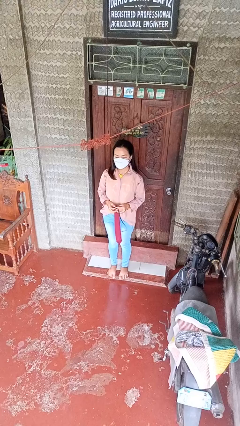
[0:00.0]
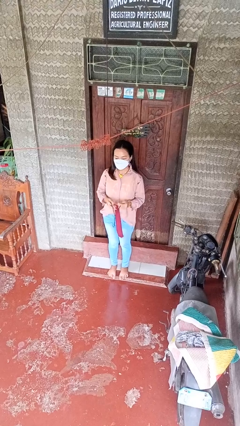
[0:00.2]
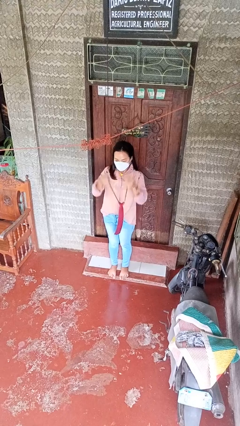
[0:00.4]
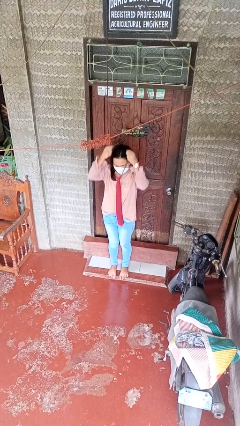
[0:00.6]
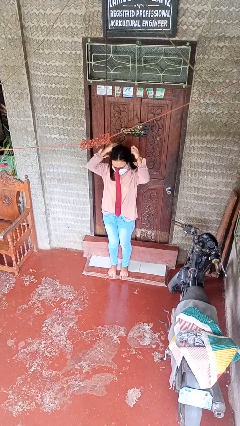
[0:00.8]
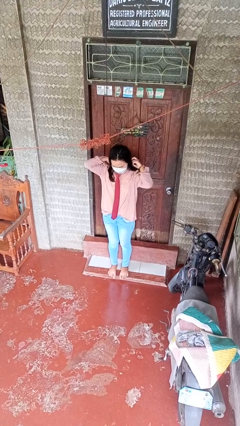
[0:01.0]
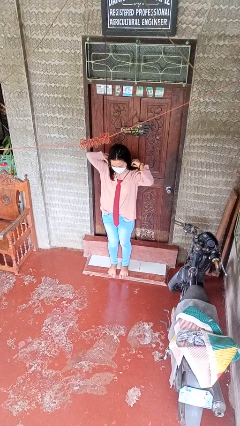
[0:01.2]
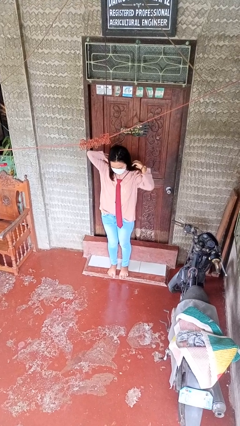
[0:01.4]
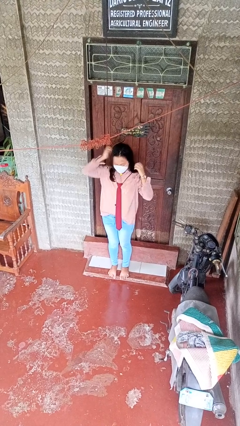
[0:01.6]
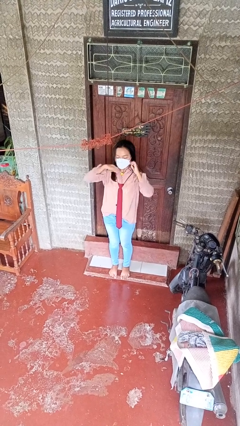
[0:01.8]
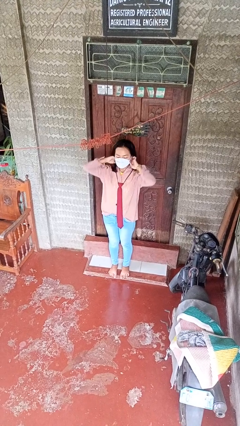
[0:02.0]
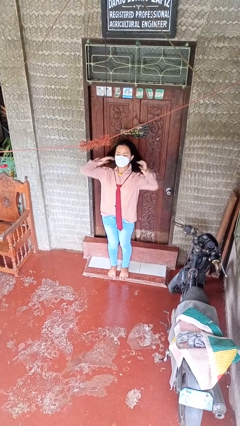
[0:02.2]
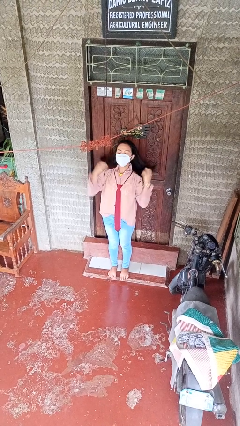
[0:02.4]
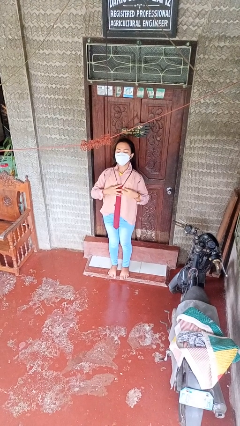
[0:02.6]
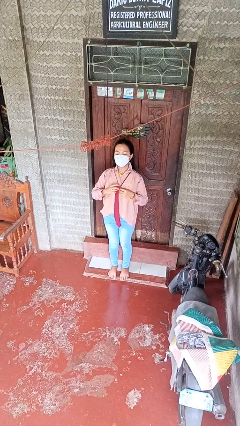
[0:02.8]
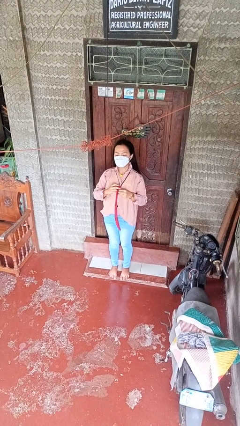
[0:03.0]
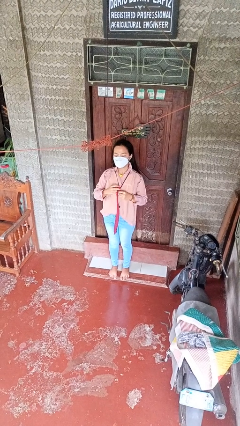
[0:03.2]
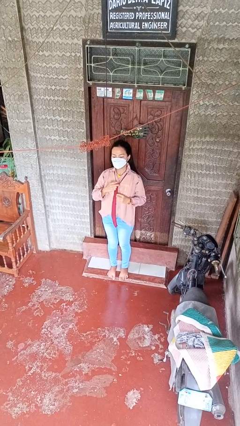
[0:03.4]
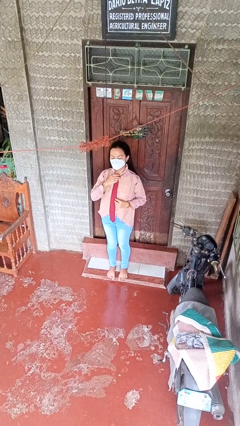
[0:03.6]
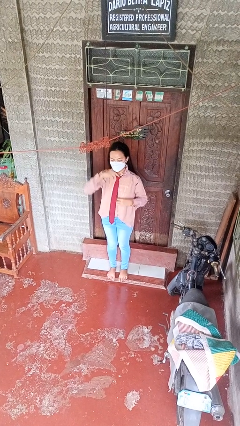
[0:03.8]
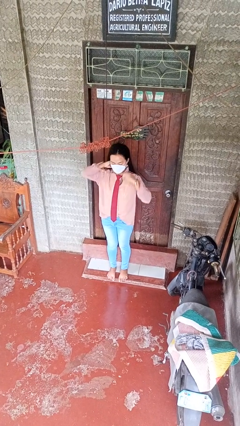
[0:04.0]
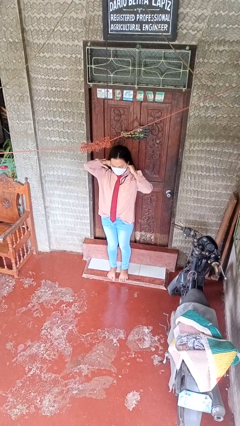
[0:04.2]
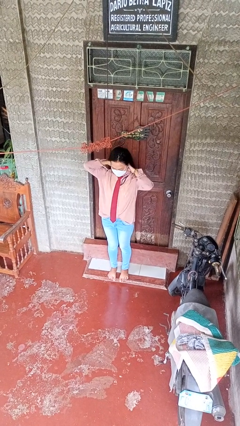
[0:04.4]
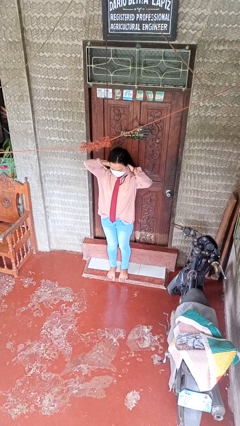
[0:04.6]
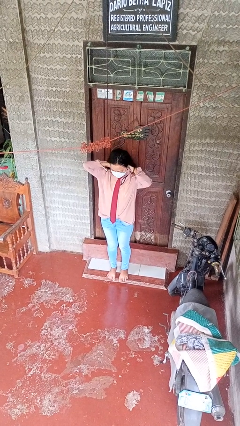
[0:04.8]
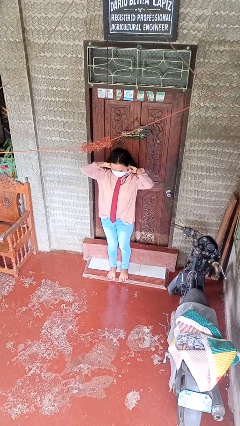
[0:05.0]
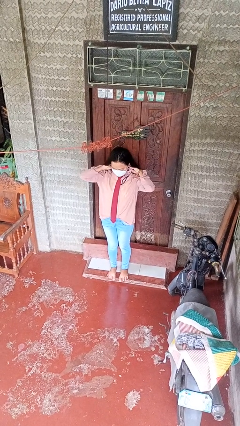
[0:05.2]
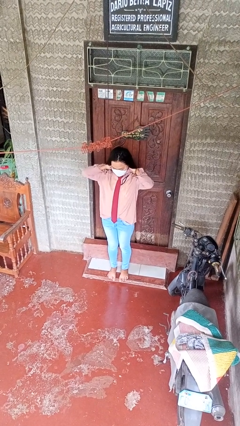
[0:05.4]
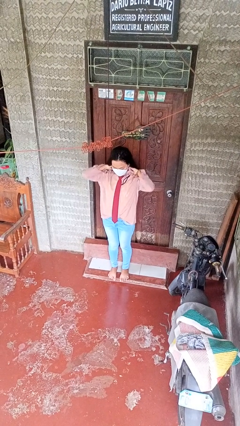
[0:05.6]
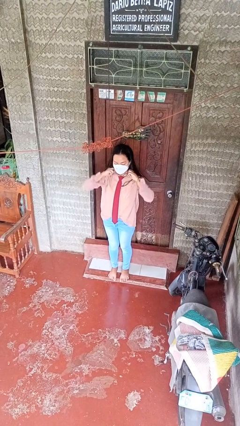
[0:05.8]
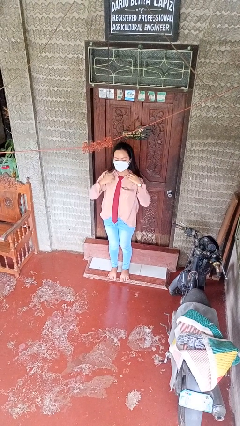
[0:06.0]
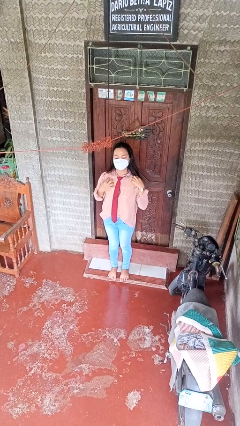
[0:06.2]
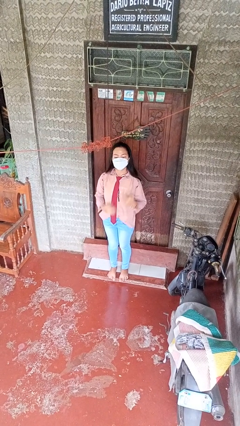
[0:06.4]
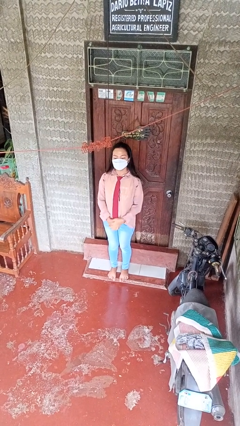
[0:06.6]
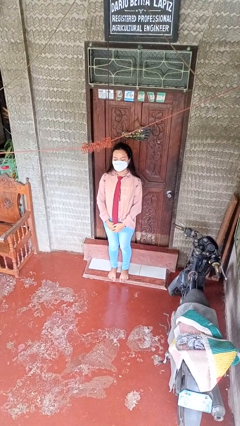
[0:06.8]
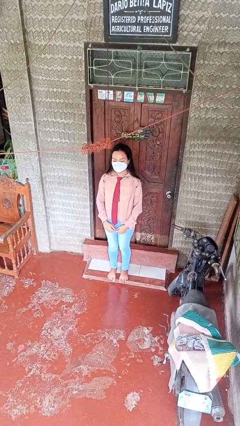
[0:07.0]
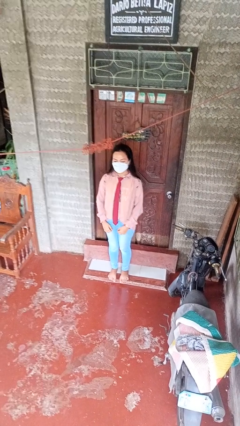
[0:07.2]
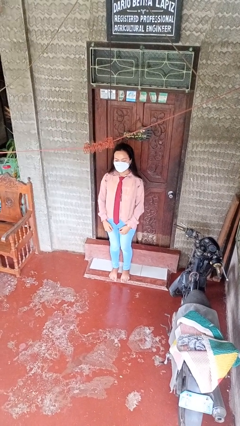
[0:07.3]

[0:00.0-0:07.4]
person puts on necktie

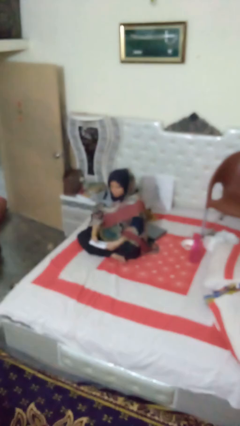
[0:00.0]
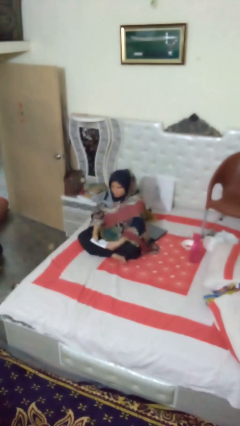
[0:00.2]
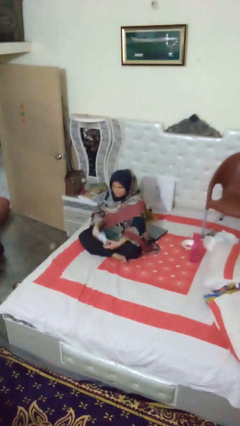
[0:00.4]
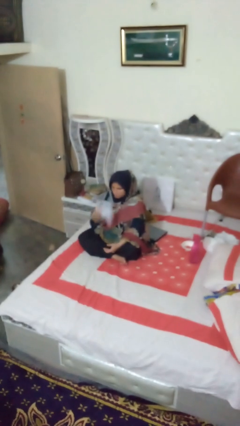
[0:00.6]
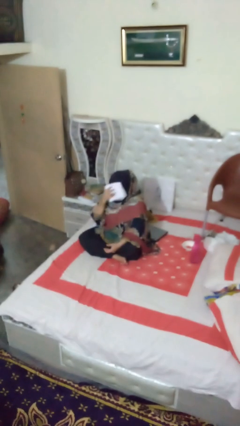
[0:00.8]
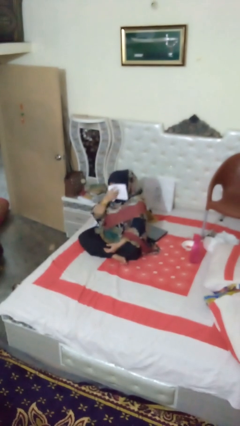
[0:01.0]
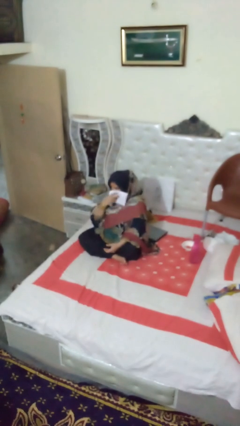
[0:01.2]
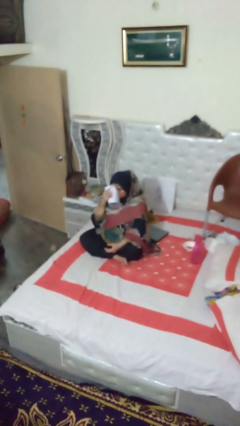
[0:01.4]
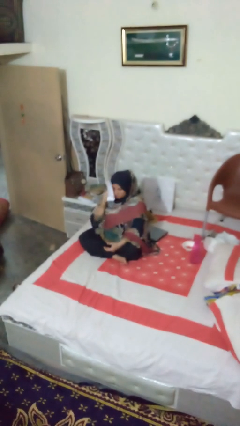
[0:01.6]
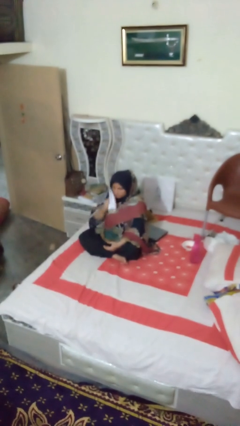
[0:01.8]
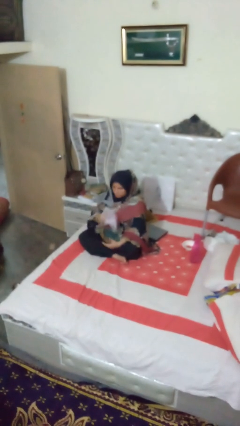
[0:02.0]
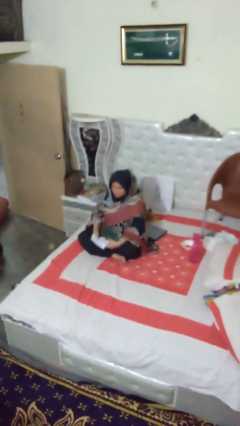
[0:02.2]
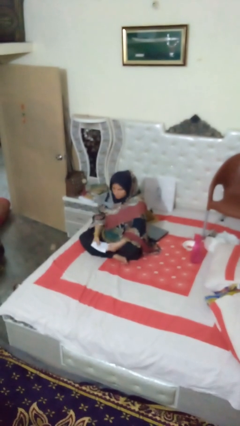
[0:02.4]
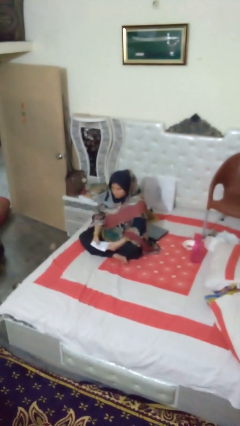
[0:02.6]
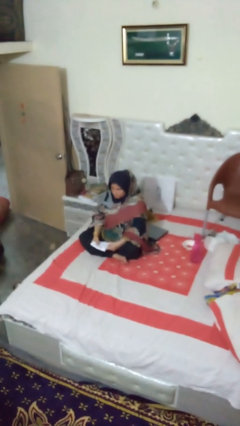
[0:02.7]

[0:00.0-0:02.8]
person wipes mouth with napkin

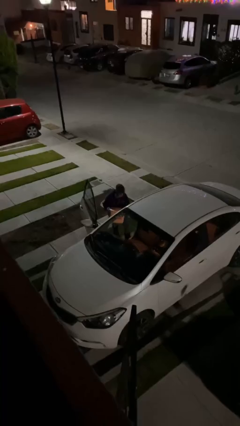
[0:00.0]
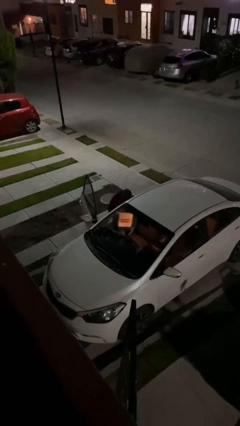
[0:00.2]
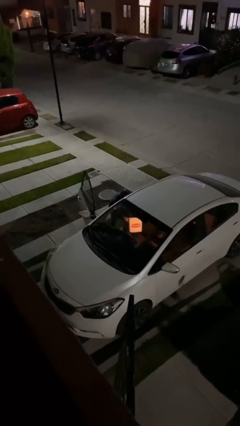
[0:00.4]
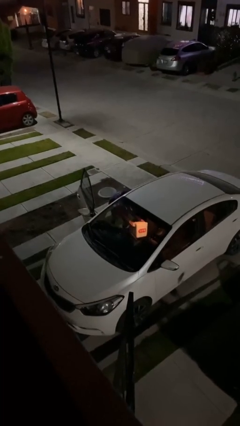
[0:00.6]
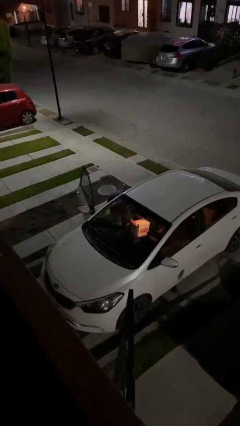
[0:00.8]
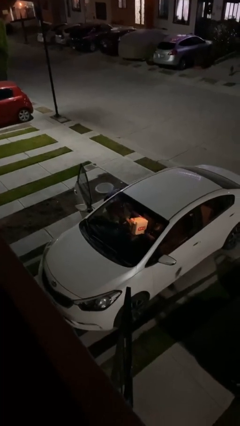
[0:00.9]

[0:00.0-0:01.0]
person loads car

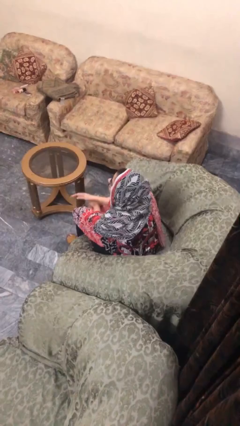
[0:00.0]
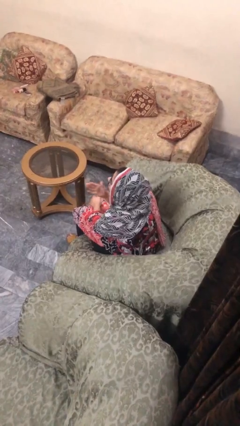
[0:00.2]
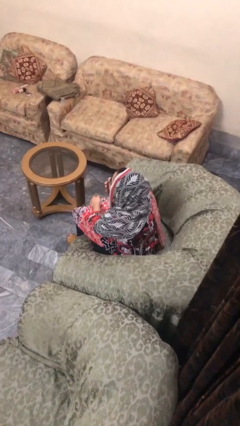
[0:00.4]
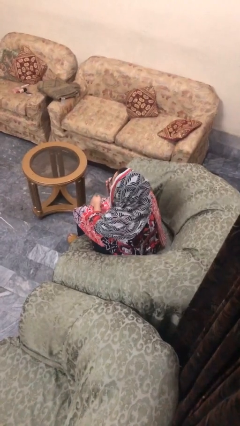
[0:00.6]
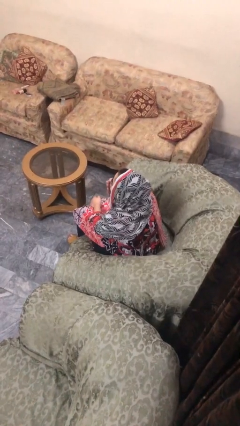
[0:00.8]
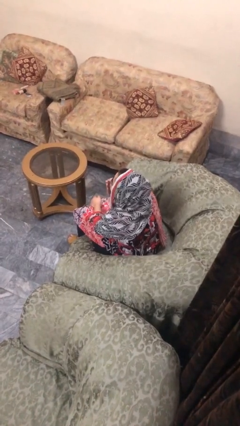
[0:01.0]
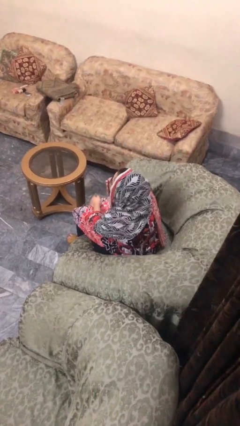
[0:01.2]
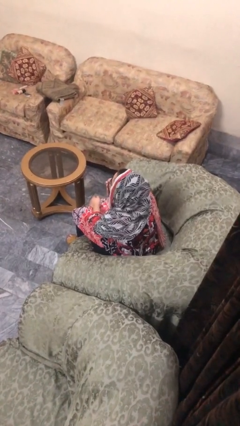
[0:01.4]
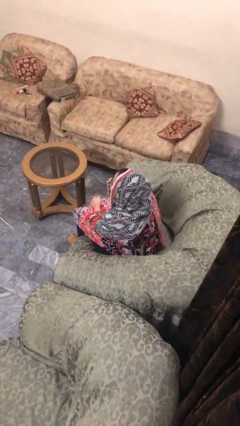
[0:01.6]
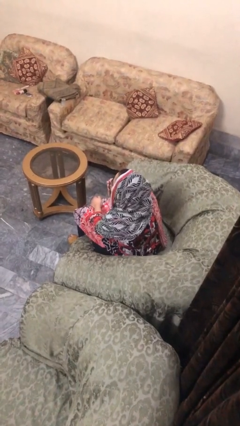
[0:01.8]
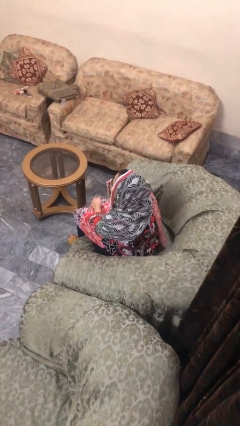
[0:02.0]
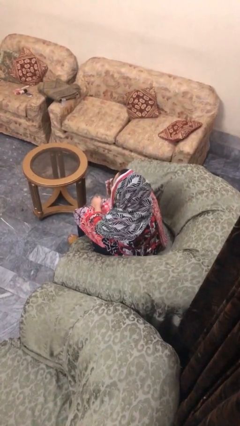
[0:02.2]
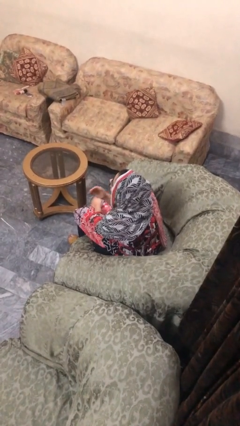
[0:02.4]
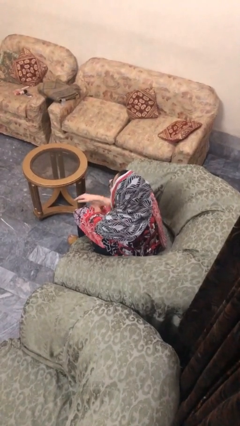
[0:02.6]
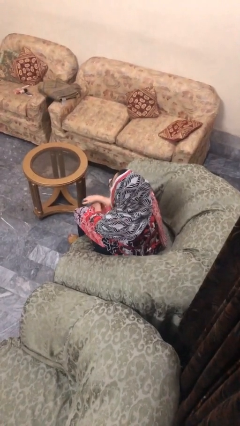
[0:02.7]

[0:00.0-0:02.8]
person yawns

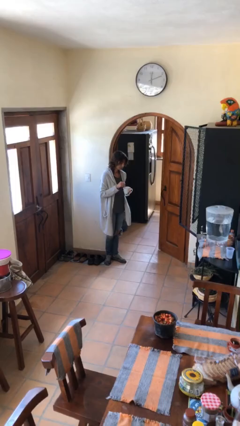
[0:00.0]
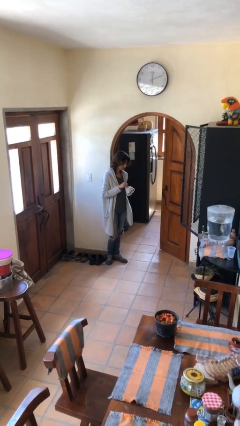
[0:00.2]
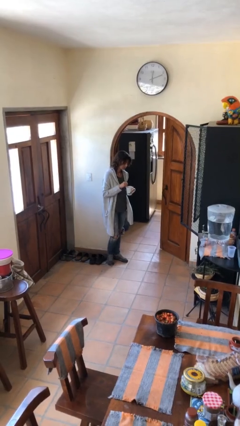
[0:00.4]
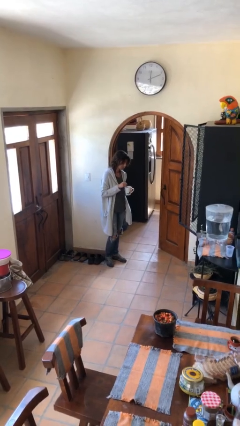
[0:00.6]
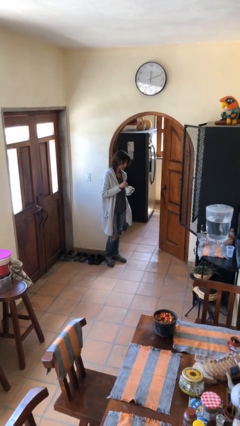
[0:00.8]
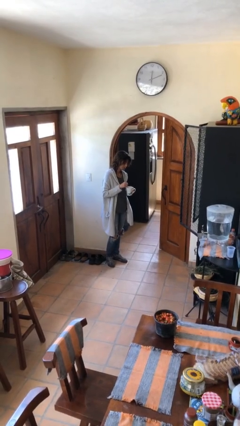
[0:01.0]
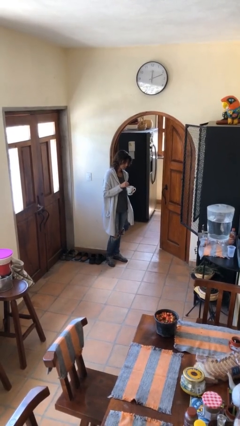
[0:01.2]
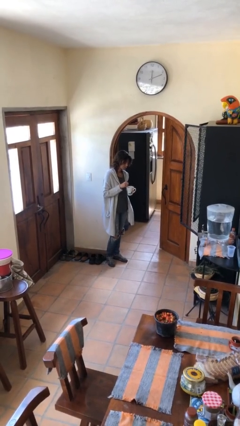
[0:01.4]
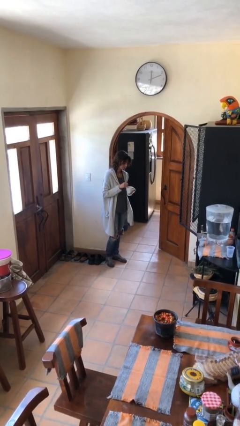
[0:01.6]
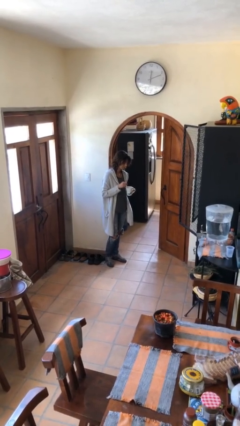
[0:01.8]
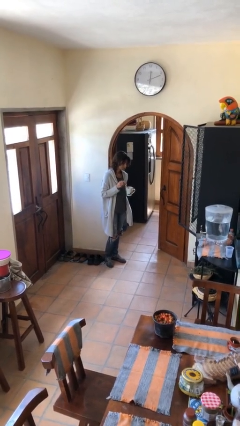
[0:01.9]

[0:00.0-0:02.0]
person stirs mug

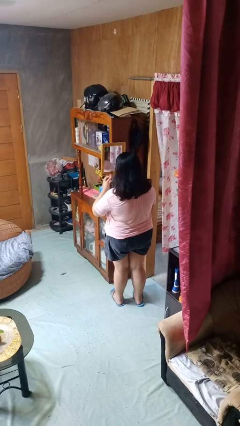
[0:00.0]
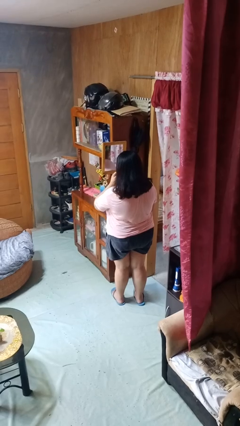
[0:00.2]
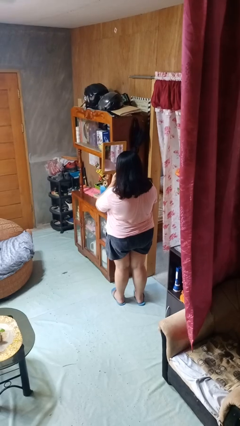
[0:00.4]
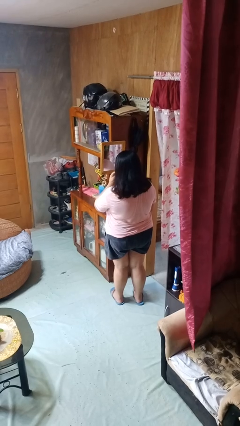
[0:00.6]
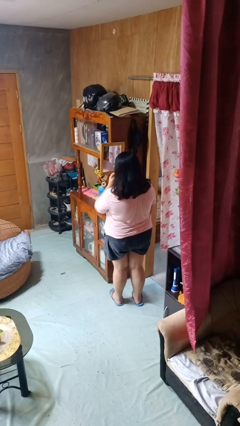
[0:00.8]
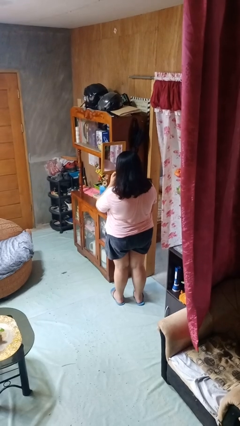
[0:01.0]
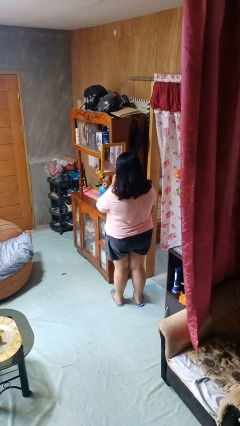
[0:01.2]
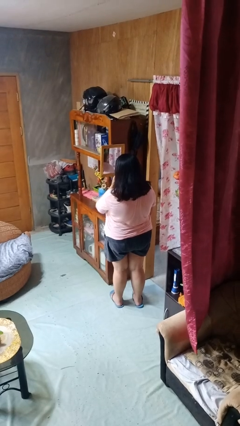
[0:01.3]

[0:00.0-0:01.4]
person applies lip makeup
